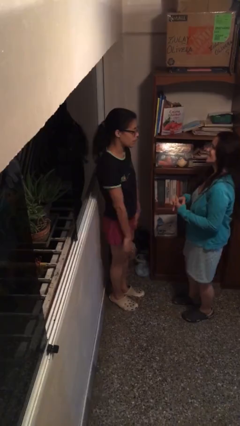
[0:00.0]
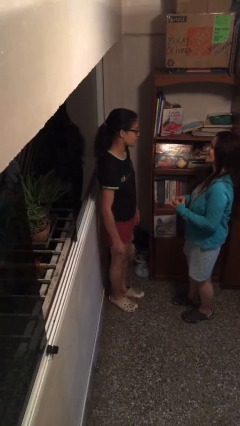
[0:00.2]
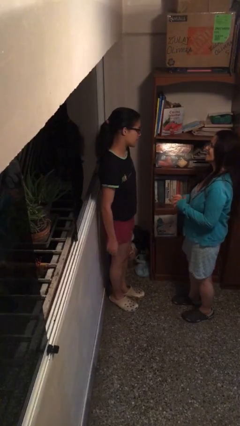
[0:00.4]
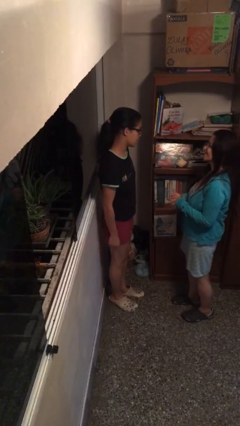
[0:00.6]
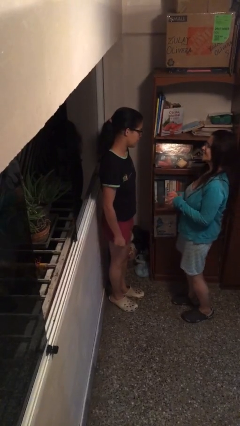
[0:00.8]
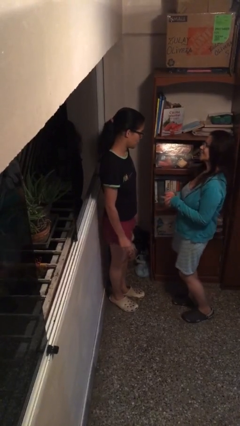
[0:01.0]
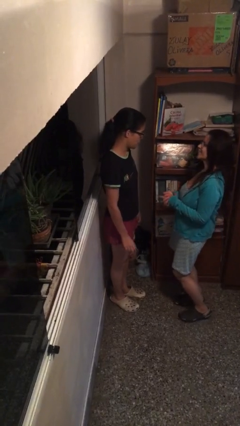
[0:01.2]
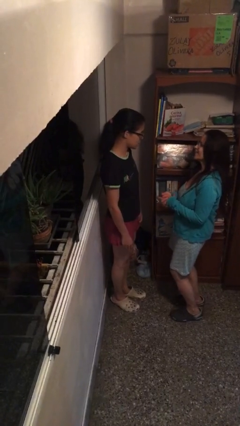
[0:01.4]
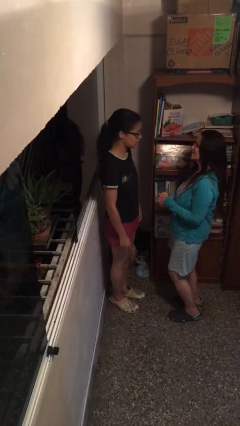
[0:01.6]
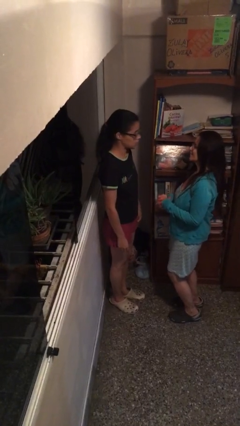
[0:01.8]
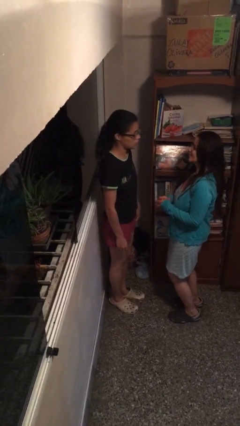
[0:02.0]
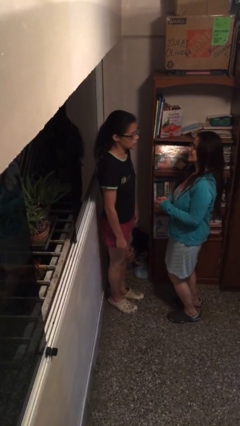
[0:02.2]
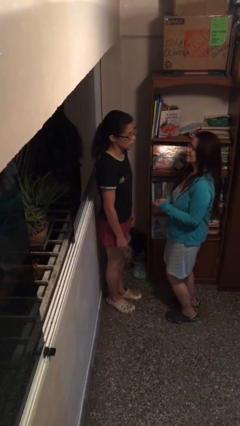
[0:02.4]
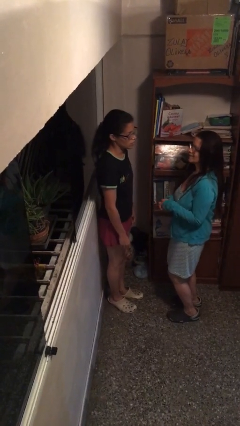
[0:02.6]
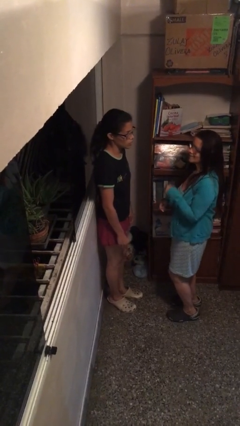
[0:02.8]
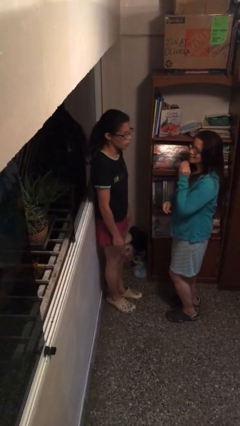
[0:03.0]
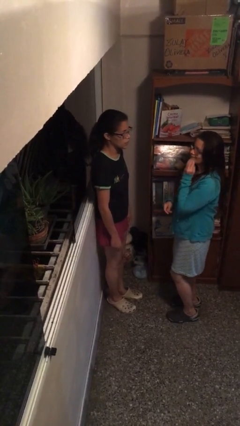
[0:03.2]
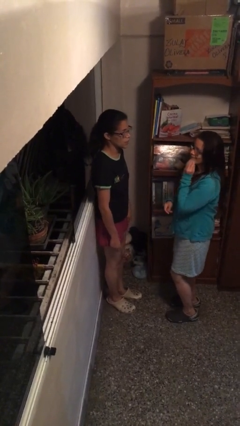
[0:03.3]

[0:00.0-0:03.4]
person talks to person

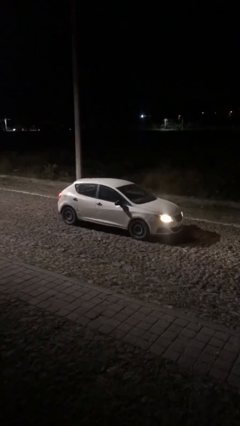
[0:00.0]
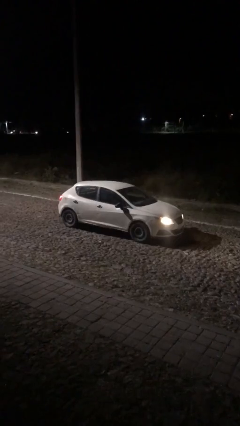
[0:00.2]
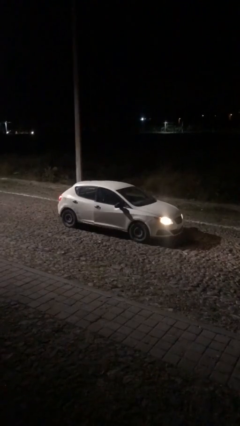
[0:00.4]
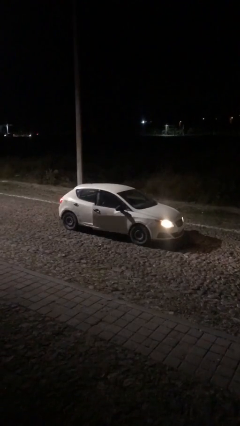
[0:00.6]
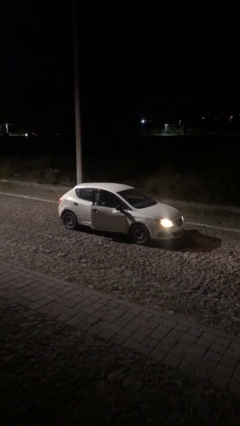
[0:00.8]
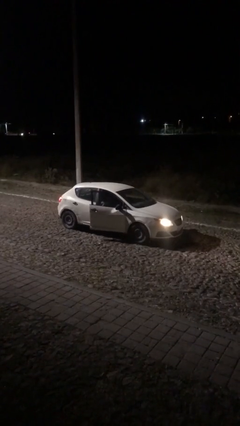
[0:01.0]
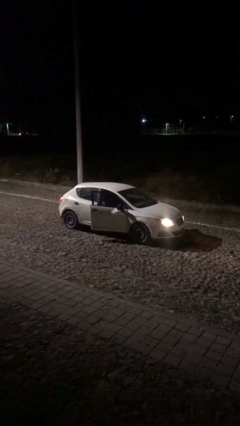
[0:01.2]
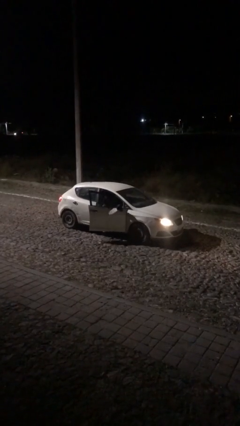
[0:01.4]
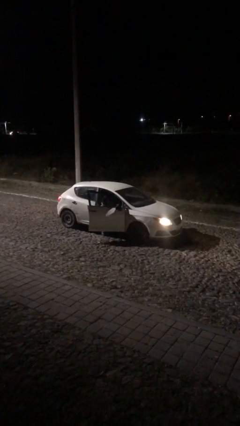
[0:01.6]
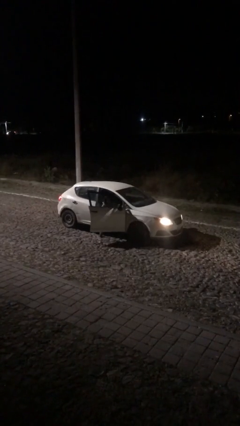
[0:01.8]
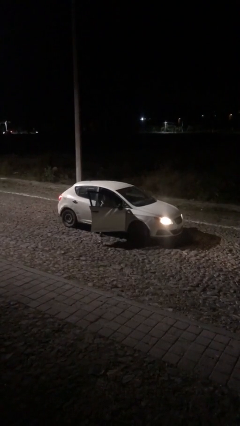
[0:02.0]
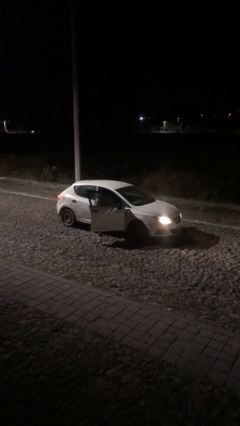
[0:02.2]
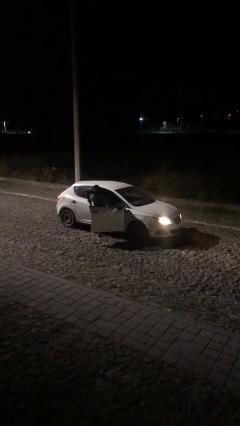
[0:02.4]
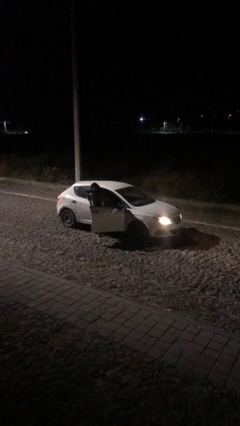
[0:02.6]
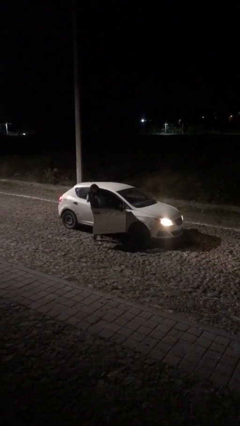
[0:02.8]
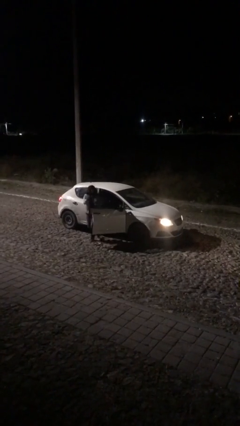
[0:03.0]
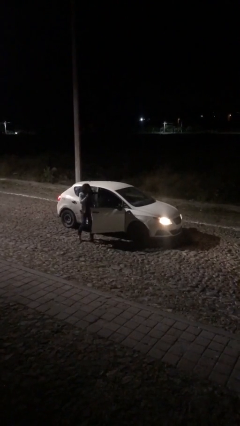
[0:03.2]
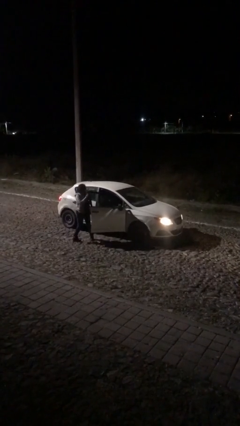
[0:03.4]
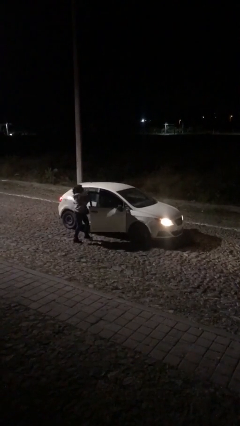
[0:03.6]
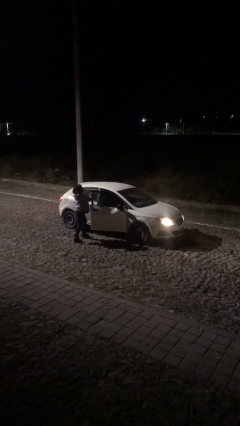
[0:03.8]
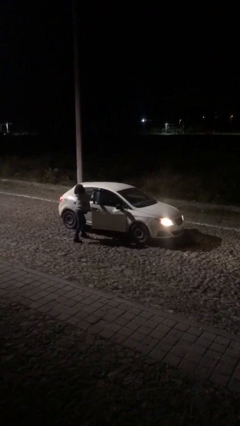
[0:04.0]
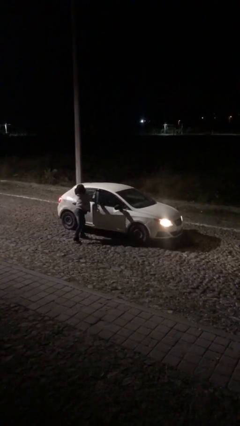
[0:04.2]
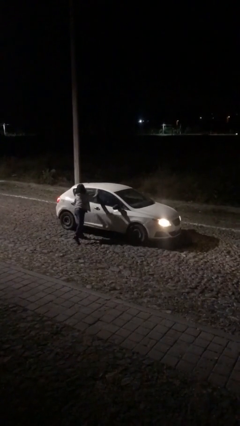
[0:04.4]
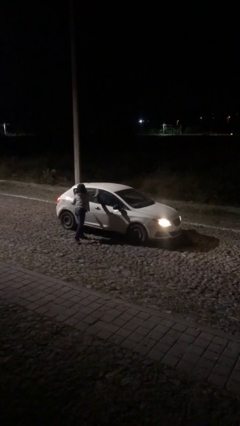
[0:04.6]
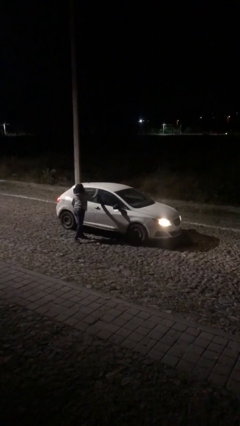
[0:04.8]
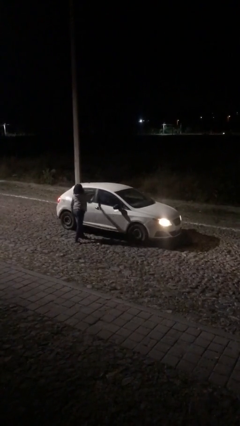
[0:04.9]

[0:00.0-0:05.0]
car drops off person

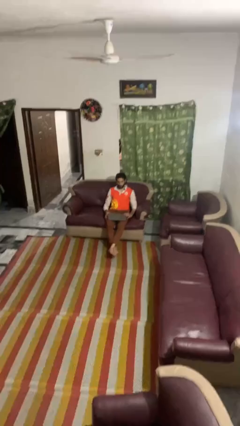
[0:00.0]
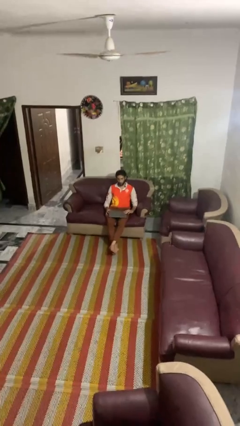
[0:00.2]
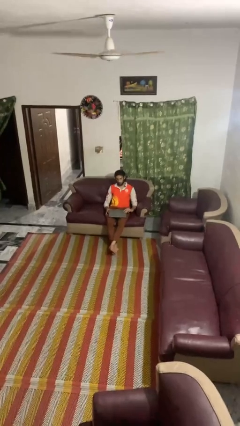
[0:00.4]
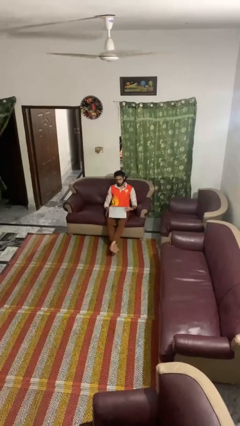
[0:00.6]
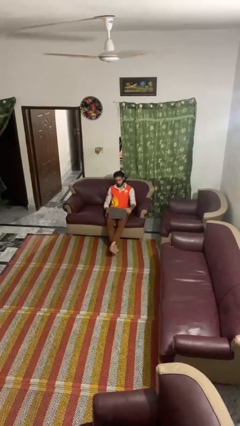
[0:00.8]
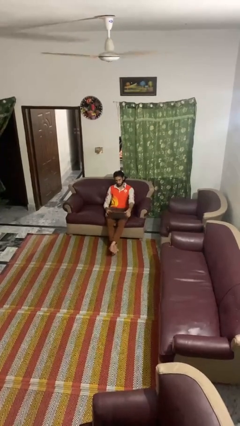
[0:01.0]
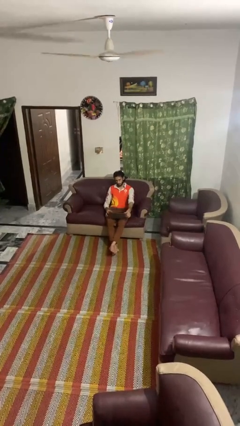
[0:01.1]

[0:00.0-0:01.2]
person opens laptop

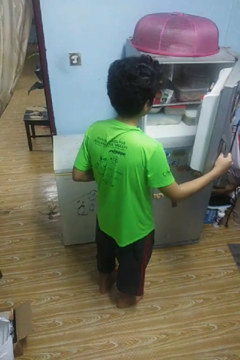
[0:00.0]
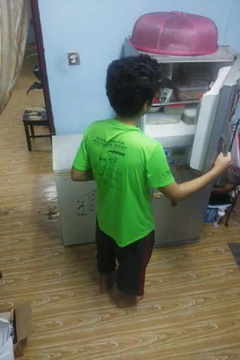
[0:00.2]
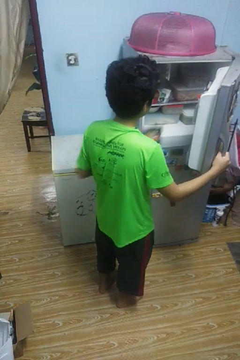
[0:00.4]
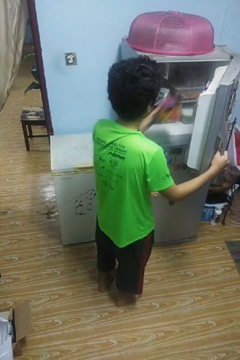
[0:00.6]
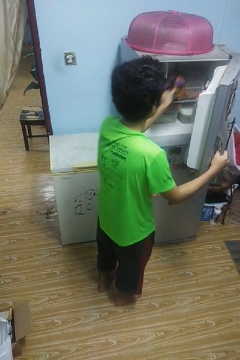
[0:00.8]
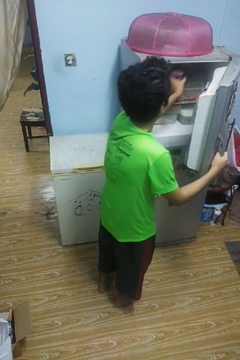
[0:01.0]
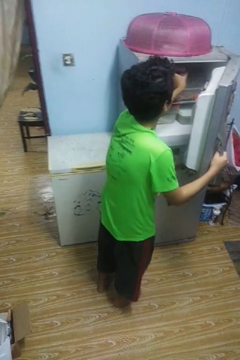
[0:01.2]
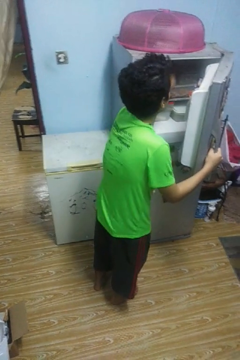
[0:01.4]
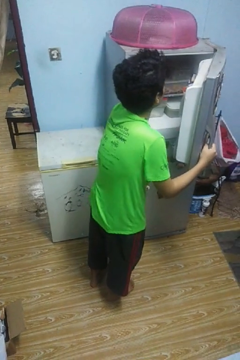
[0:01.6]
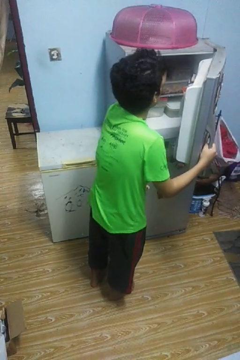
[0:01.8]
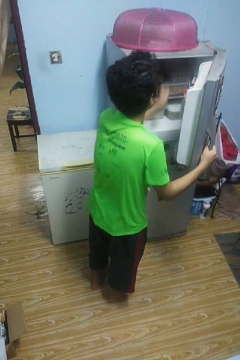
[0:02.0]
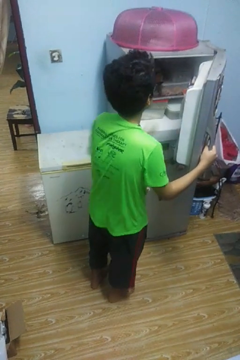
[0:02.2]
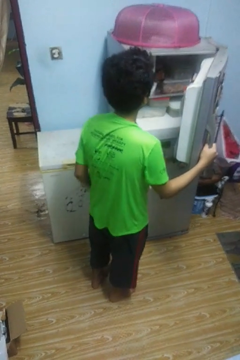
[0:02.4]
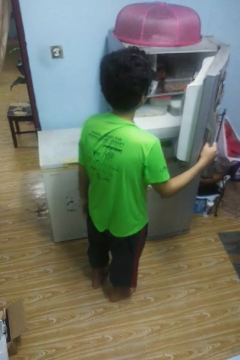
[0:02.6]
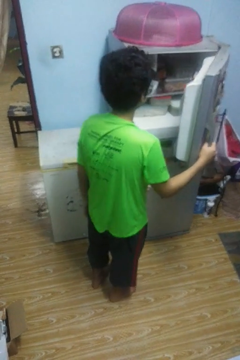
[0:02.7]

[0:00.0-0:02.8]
person puts object into refrigerator

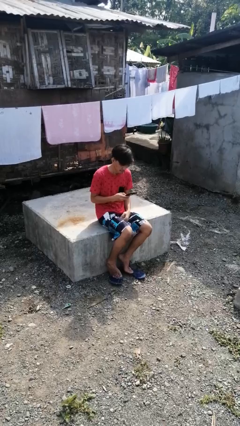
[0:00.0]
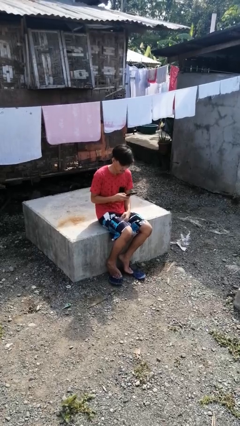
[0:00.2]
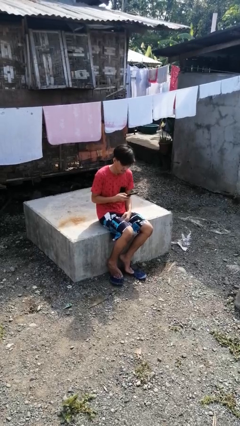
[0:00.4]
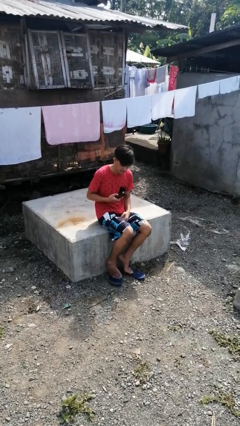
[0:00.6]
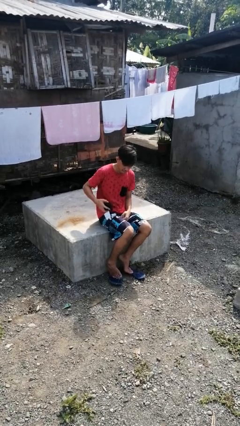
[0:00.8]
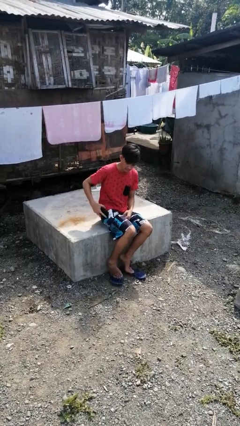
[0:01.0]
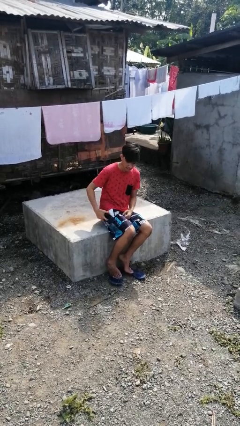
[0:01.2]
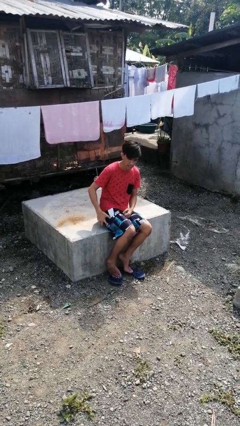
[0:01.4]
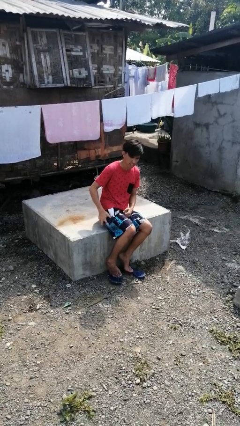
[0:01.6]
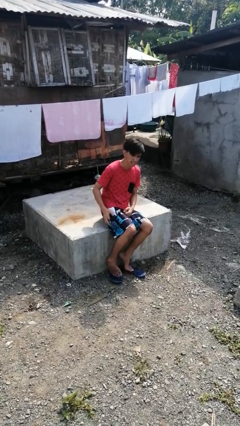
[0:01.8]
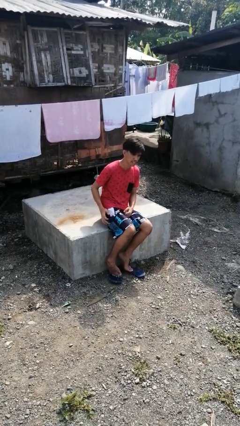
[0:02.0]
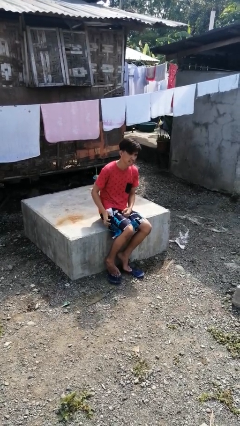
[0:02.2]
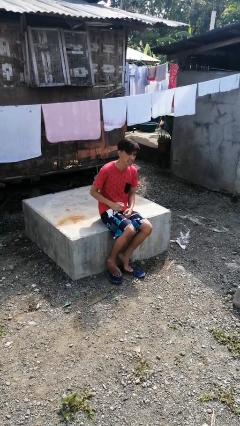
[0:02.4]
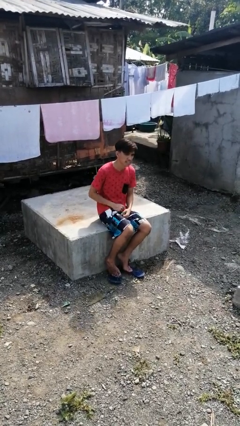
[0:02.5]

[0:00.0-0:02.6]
person puts phone into pocket

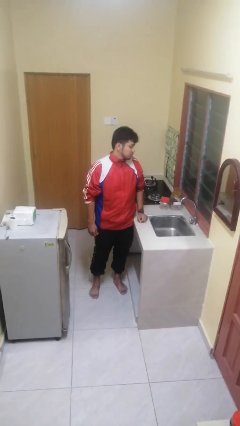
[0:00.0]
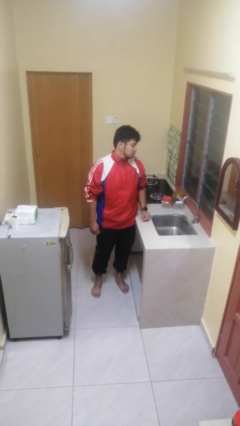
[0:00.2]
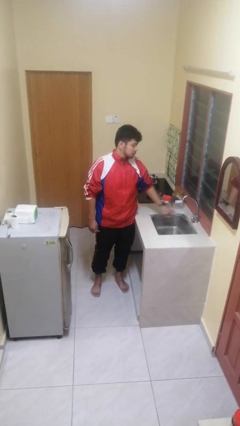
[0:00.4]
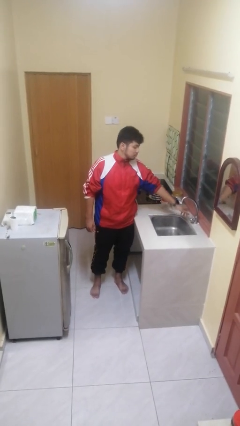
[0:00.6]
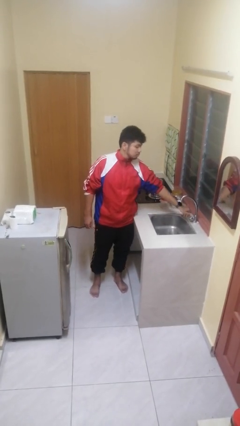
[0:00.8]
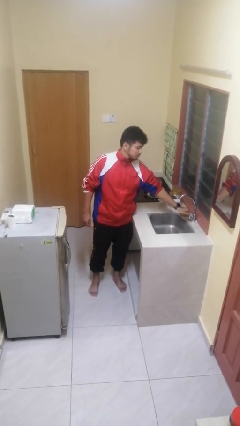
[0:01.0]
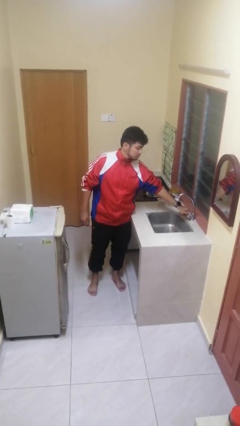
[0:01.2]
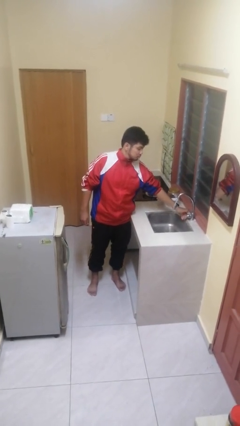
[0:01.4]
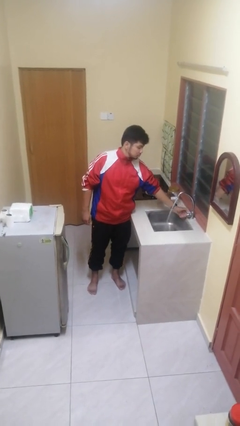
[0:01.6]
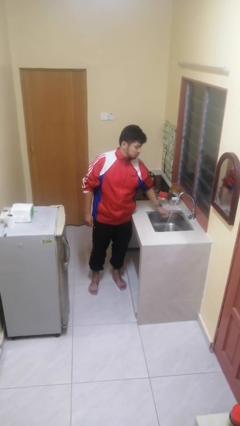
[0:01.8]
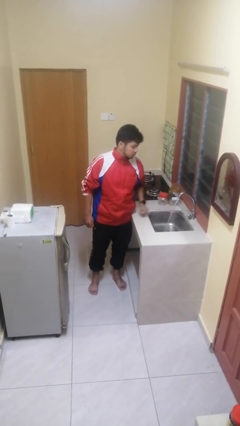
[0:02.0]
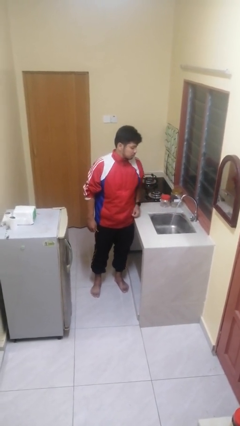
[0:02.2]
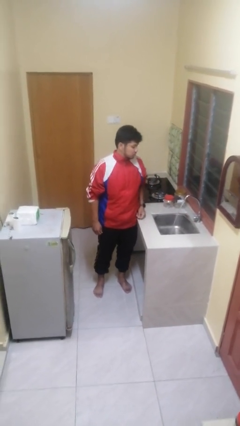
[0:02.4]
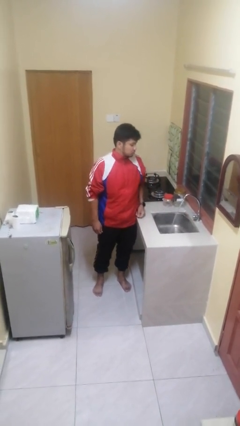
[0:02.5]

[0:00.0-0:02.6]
person turns on faucet
